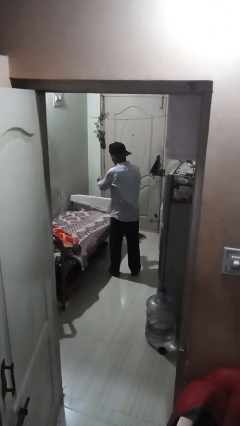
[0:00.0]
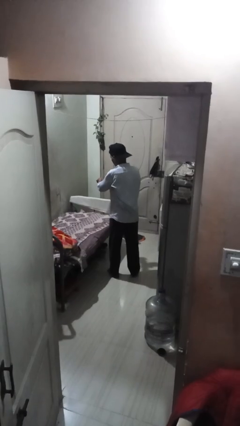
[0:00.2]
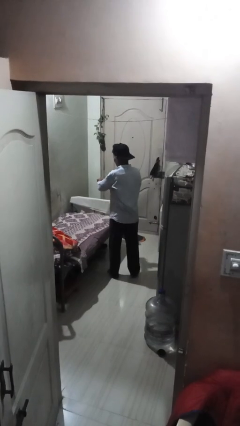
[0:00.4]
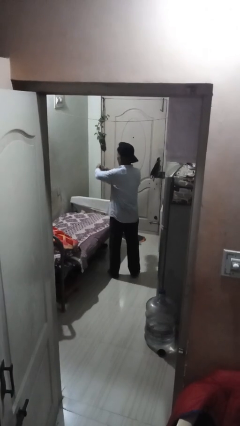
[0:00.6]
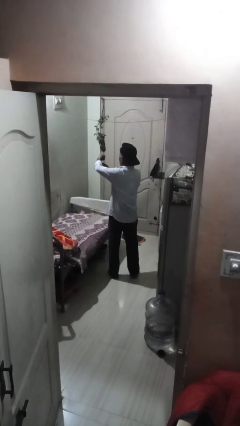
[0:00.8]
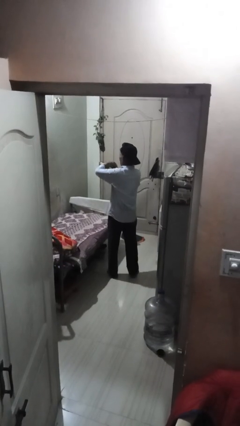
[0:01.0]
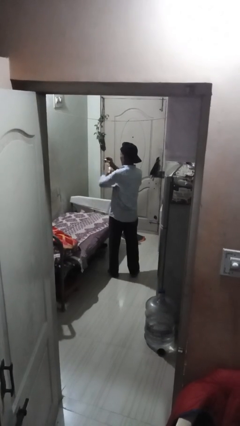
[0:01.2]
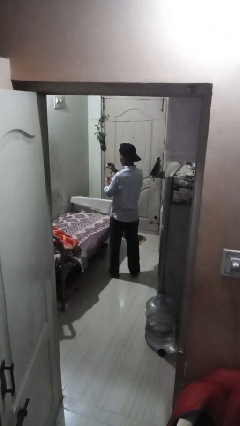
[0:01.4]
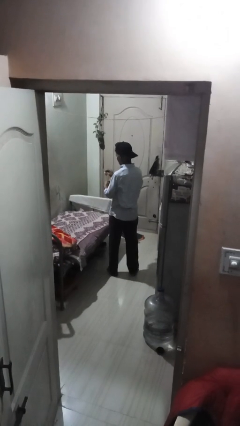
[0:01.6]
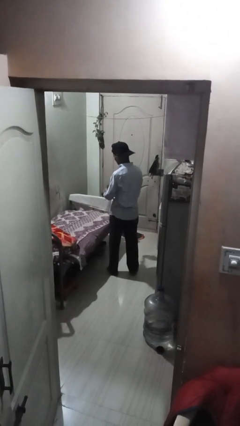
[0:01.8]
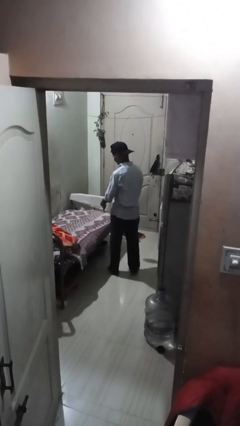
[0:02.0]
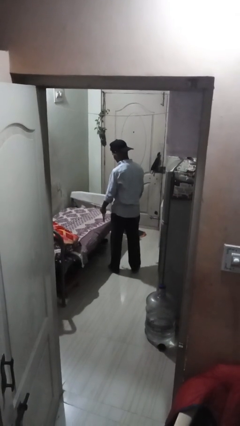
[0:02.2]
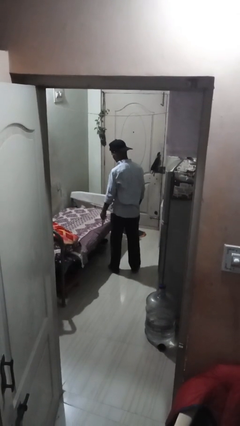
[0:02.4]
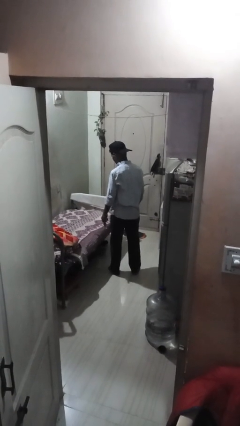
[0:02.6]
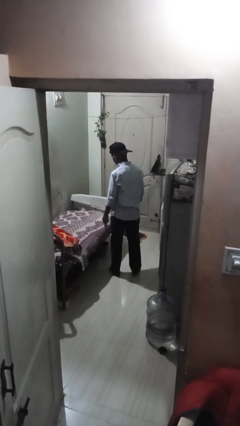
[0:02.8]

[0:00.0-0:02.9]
person takes off wristwatch

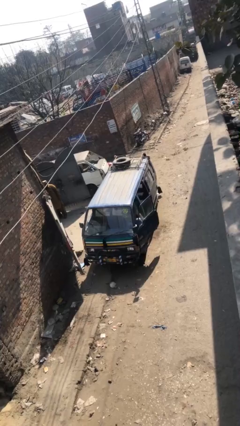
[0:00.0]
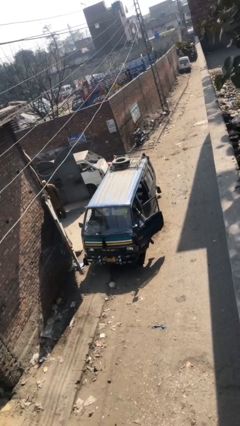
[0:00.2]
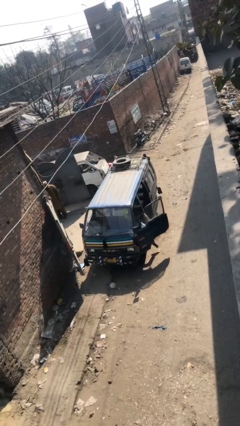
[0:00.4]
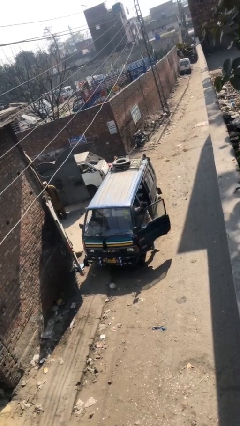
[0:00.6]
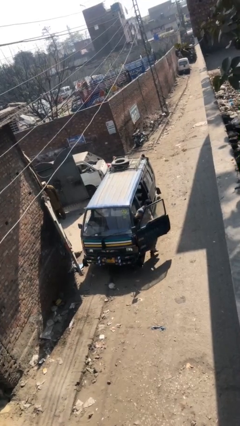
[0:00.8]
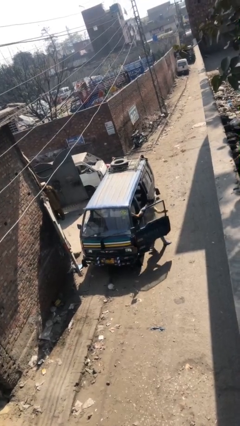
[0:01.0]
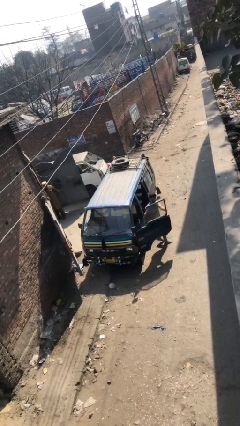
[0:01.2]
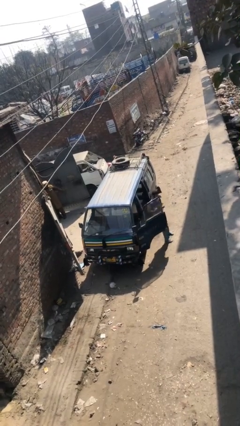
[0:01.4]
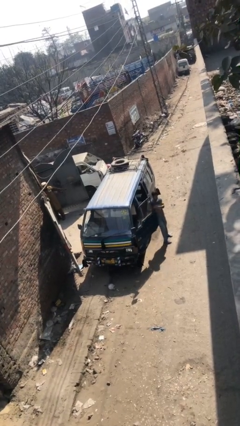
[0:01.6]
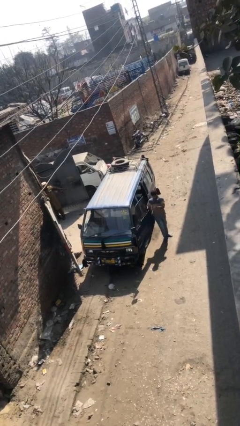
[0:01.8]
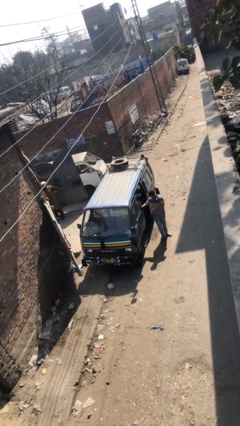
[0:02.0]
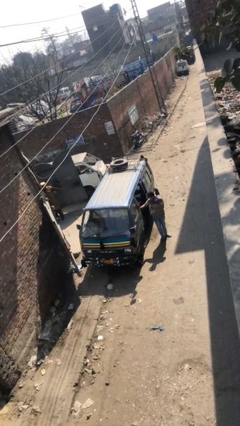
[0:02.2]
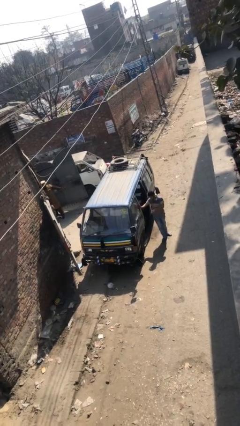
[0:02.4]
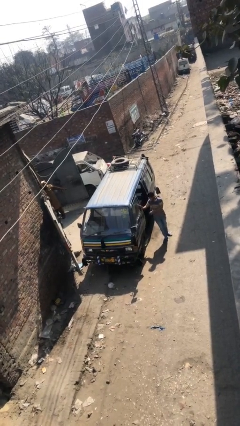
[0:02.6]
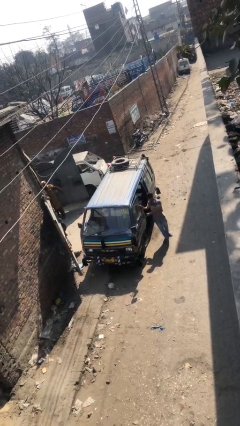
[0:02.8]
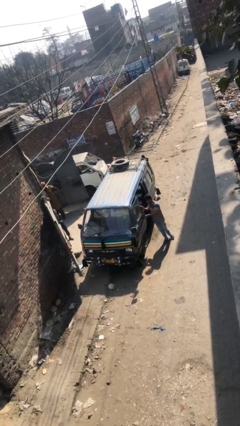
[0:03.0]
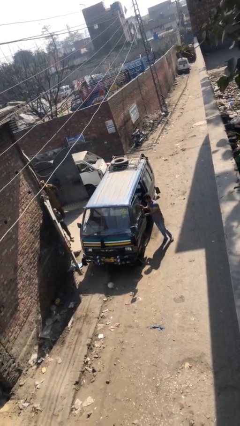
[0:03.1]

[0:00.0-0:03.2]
car drops off person

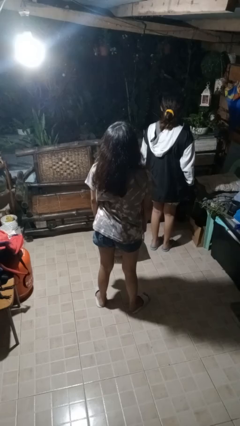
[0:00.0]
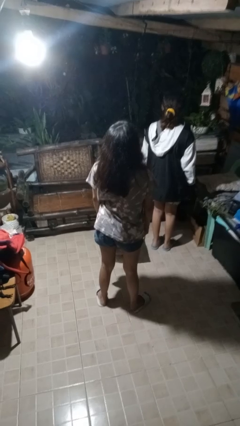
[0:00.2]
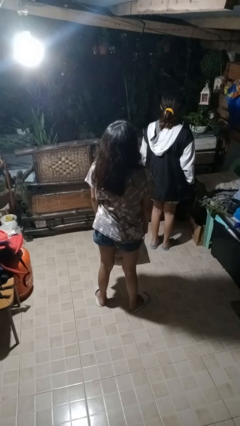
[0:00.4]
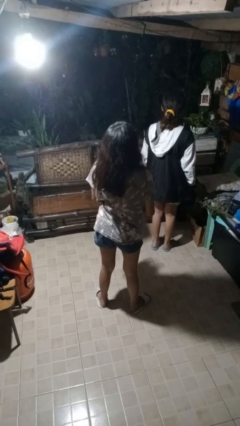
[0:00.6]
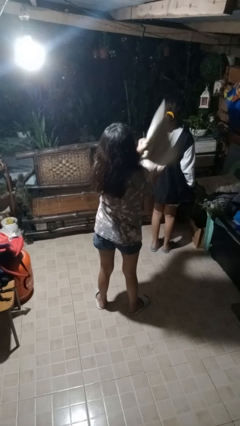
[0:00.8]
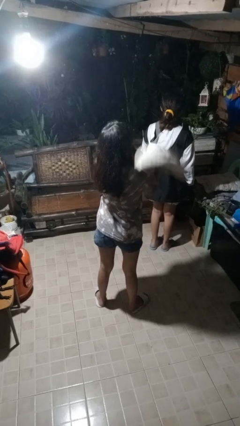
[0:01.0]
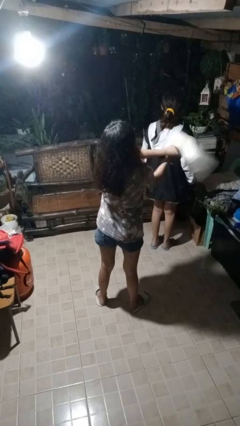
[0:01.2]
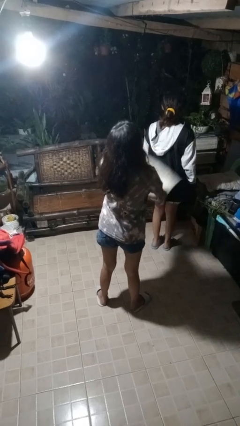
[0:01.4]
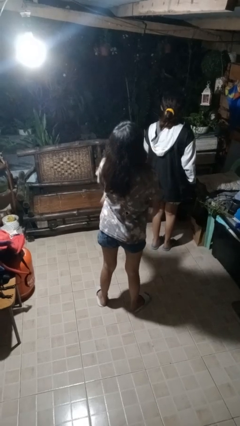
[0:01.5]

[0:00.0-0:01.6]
person hits person with pillow

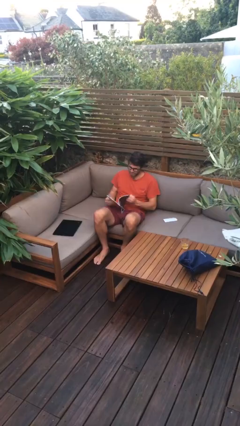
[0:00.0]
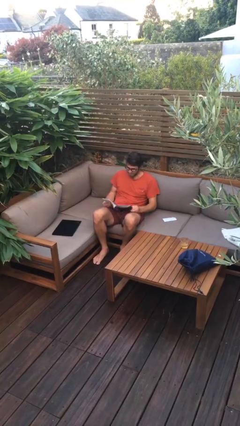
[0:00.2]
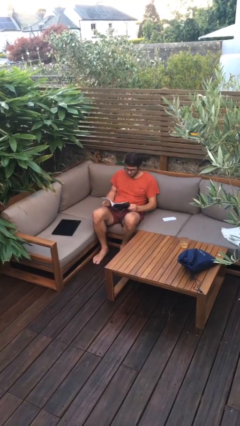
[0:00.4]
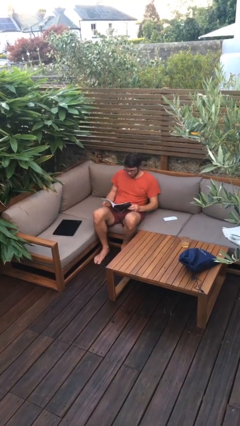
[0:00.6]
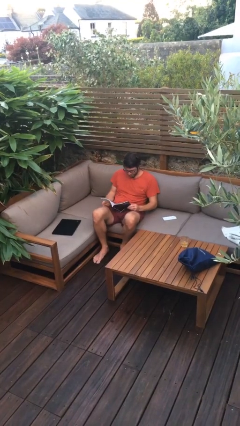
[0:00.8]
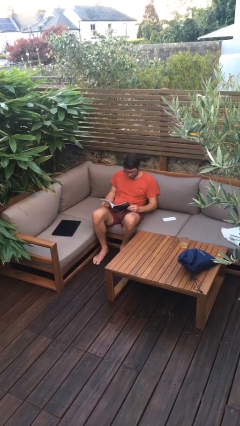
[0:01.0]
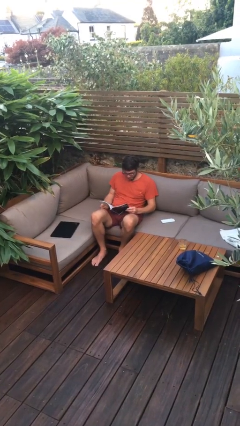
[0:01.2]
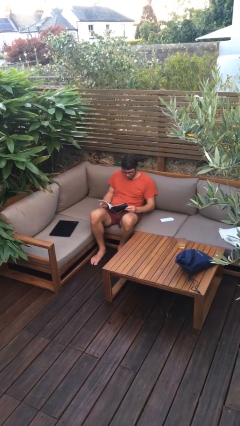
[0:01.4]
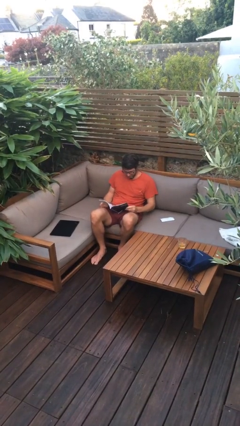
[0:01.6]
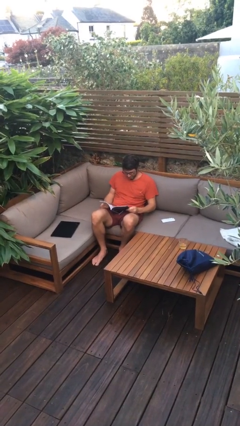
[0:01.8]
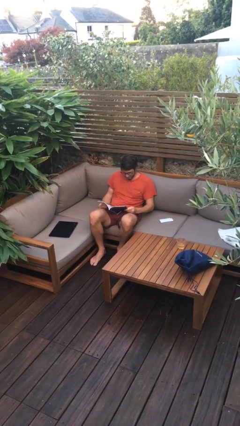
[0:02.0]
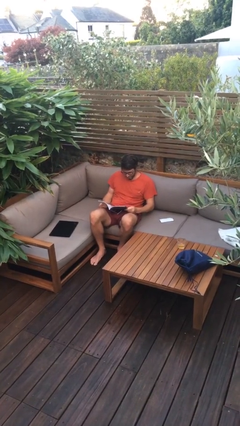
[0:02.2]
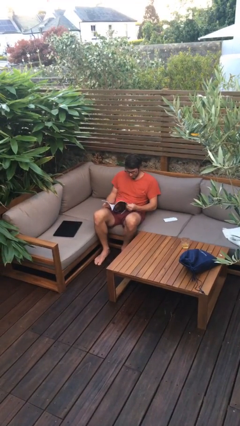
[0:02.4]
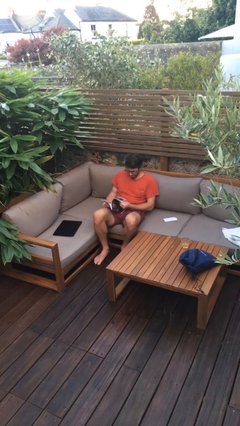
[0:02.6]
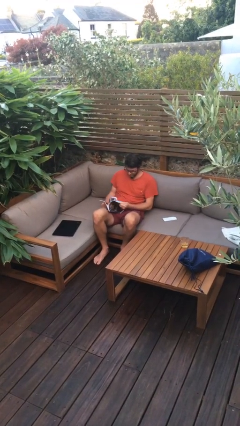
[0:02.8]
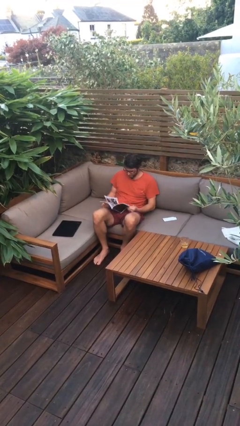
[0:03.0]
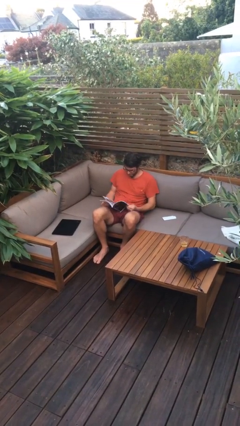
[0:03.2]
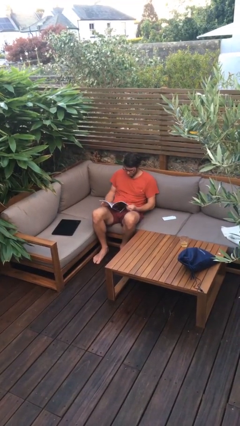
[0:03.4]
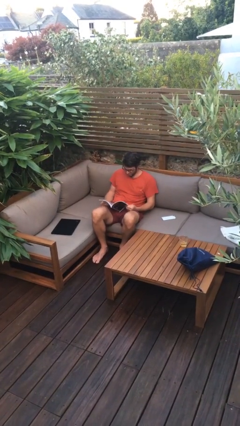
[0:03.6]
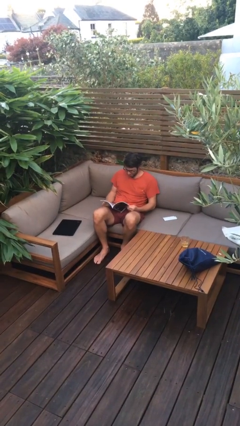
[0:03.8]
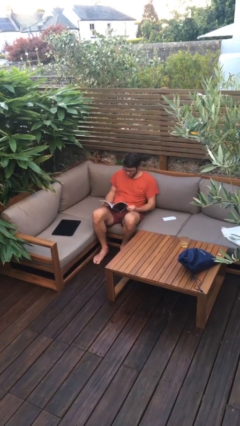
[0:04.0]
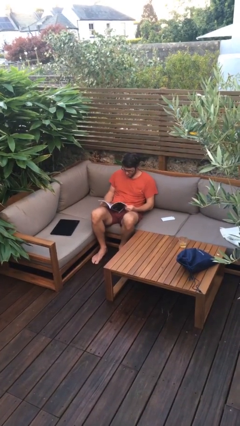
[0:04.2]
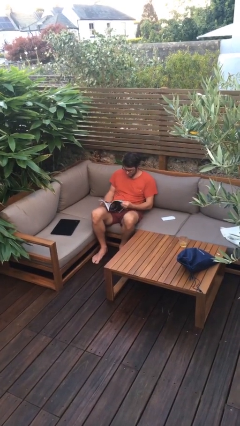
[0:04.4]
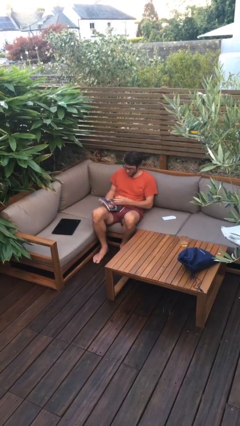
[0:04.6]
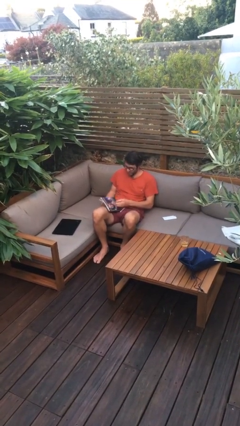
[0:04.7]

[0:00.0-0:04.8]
person reads document

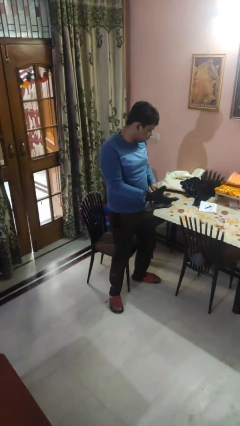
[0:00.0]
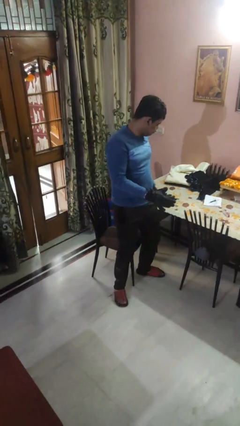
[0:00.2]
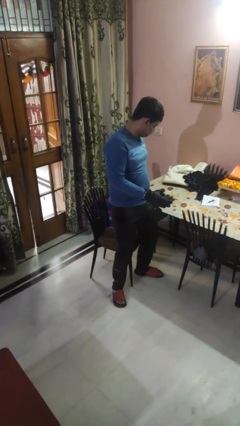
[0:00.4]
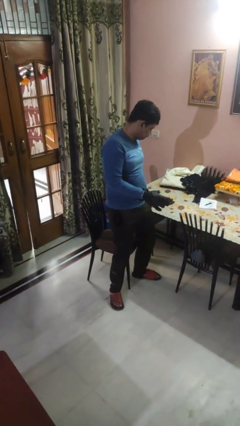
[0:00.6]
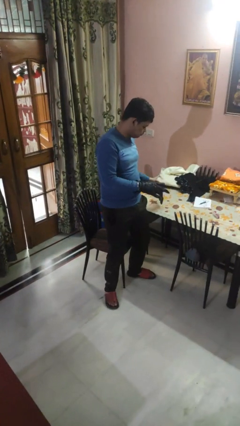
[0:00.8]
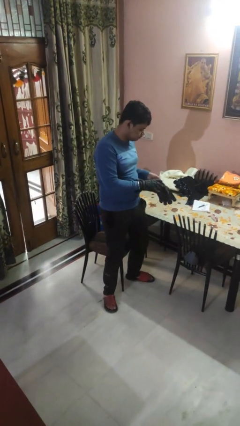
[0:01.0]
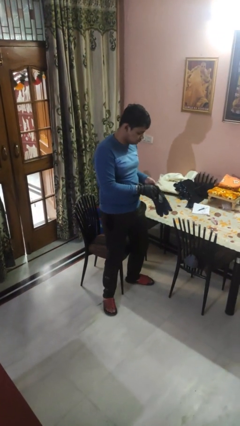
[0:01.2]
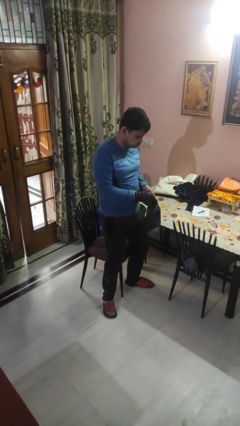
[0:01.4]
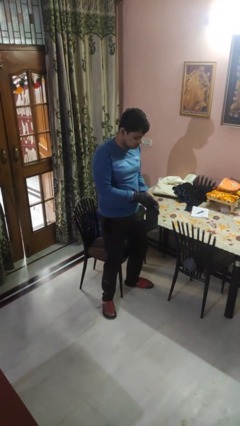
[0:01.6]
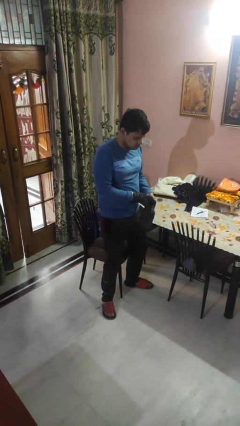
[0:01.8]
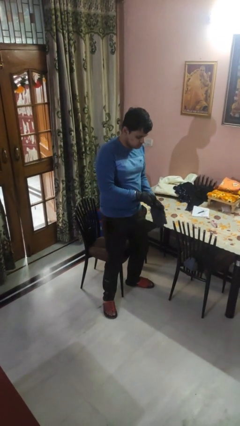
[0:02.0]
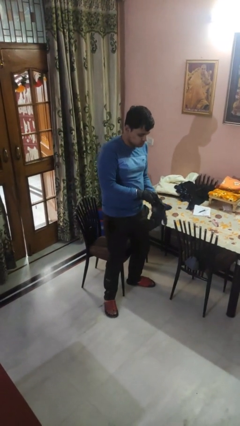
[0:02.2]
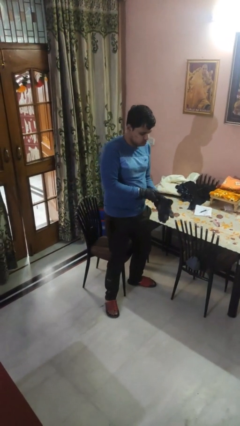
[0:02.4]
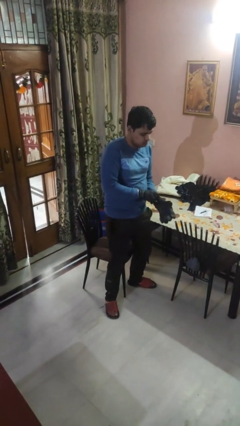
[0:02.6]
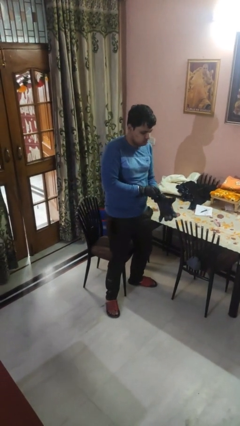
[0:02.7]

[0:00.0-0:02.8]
person puts on gloves

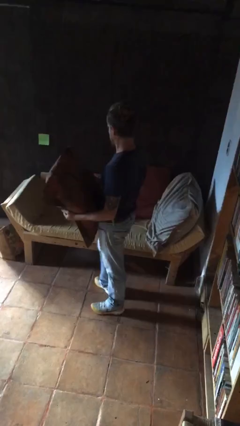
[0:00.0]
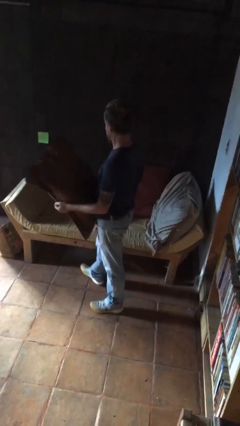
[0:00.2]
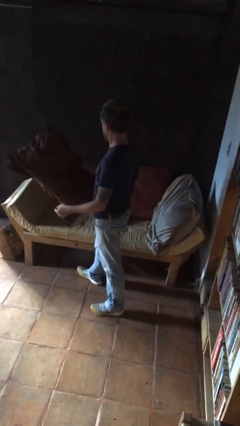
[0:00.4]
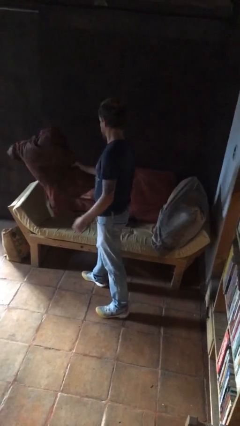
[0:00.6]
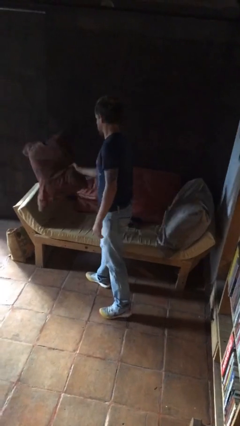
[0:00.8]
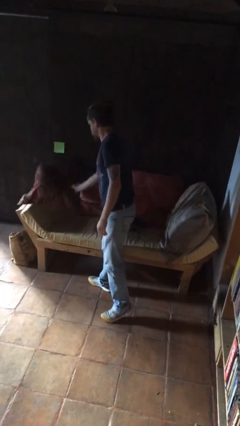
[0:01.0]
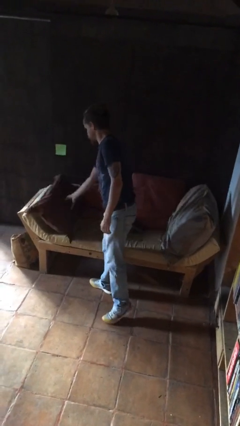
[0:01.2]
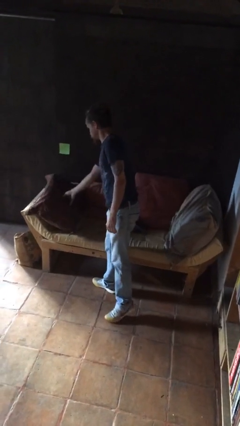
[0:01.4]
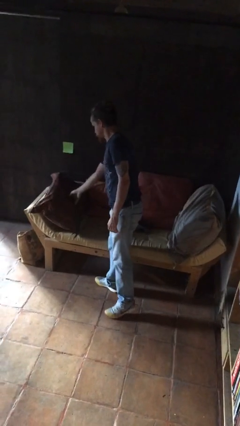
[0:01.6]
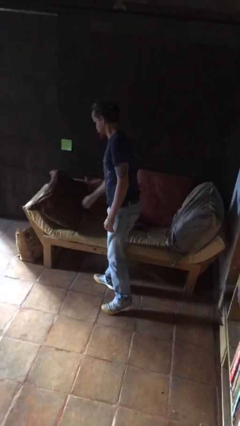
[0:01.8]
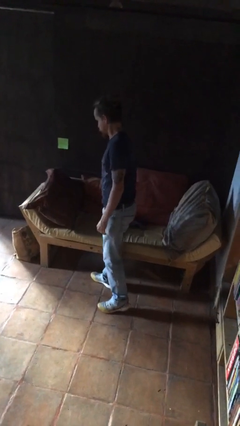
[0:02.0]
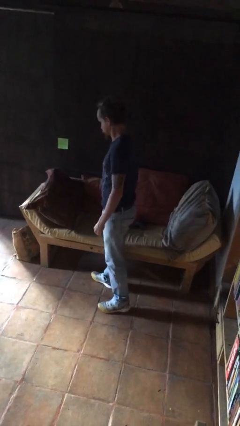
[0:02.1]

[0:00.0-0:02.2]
person puts down object on couch
